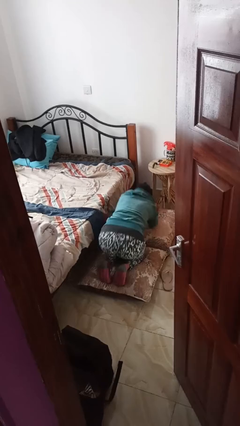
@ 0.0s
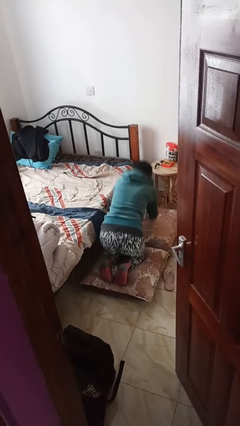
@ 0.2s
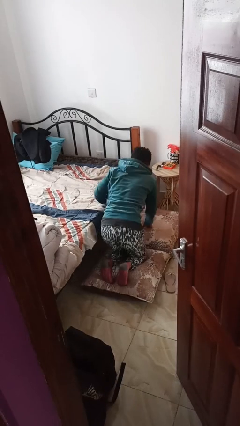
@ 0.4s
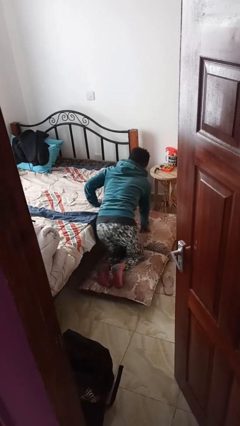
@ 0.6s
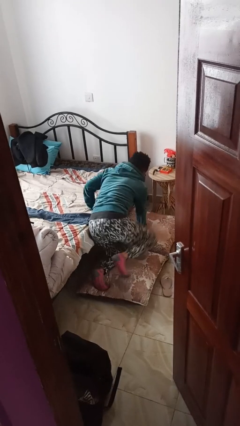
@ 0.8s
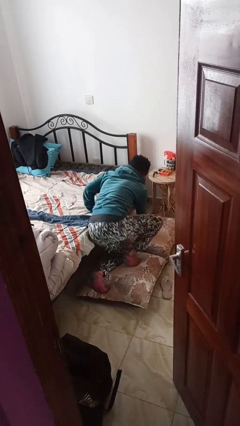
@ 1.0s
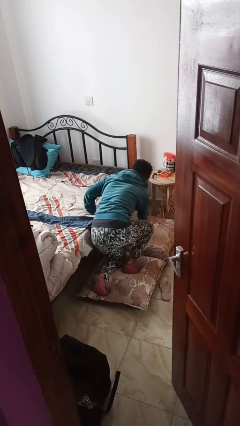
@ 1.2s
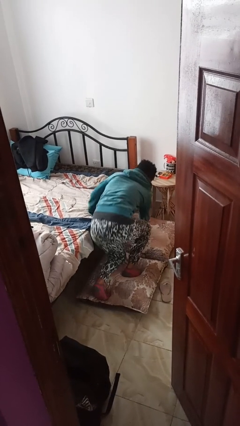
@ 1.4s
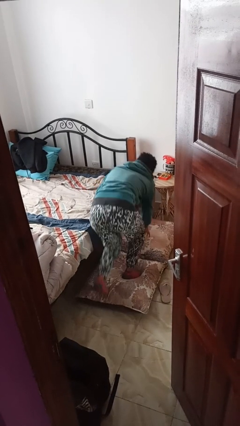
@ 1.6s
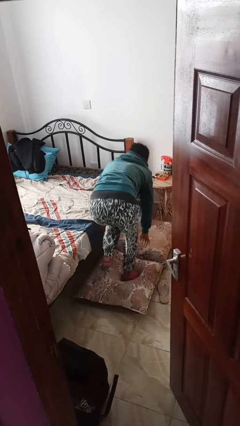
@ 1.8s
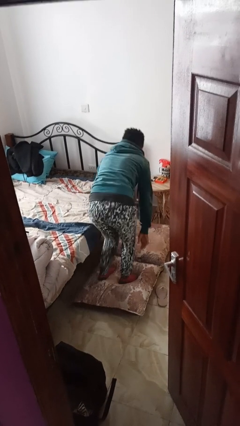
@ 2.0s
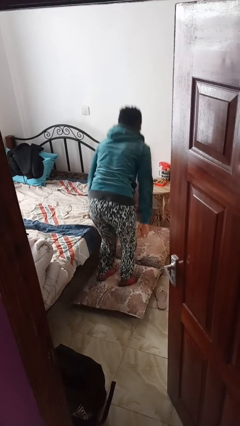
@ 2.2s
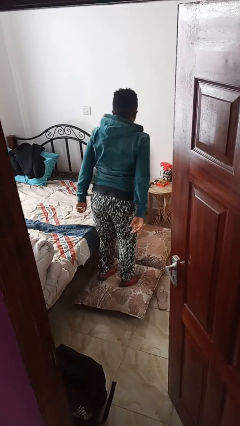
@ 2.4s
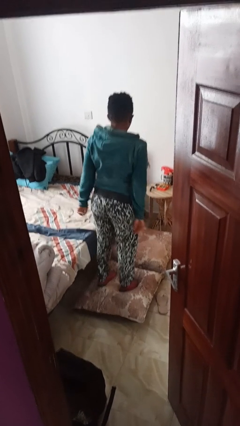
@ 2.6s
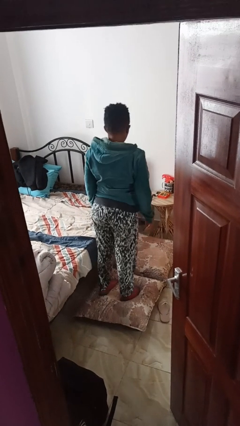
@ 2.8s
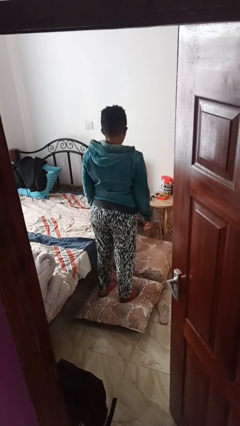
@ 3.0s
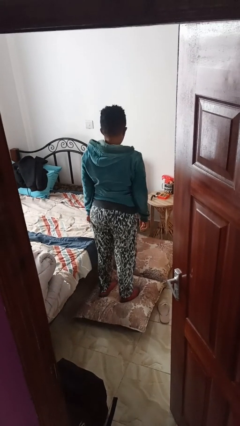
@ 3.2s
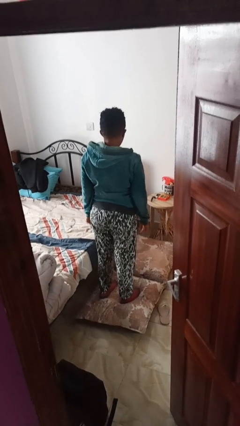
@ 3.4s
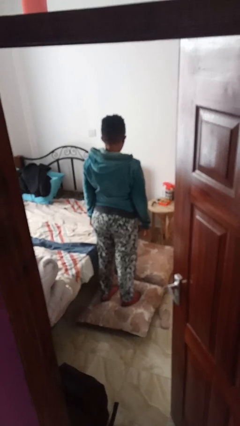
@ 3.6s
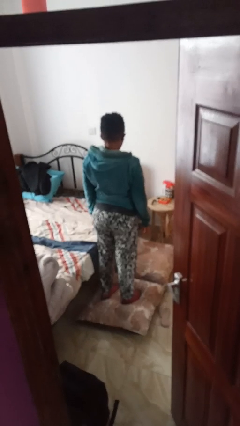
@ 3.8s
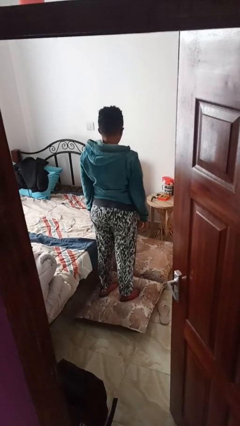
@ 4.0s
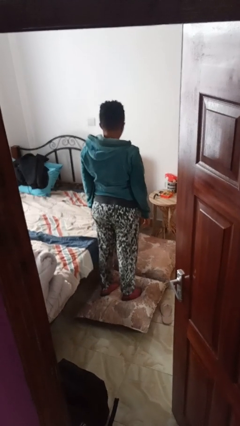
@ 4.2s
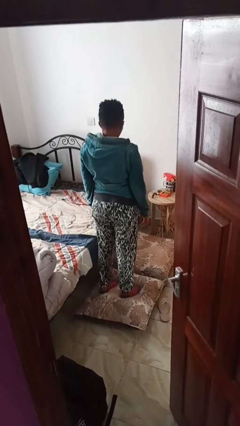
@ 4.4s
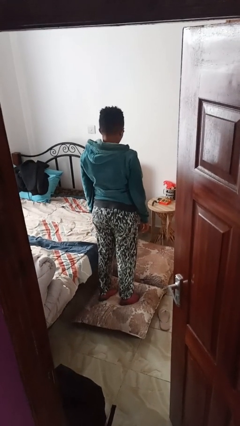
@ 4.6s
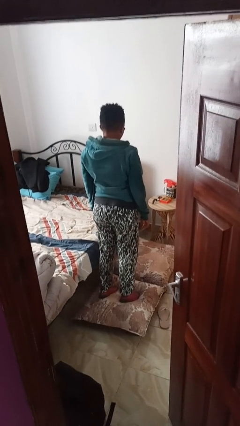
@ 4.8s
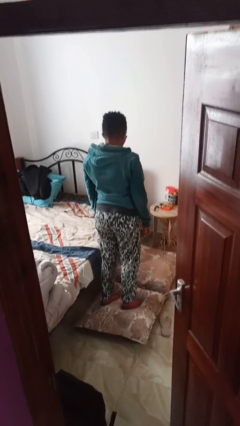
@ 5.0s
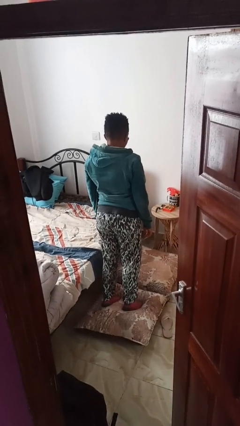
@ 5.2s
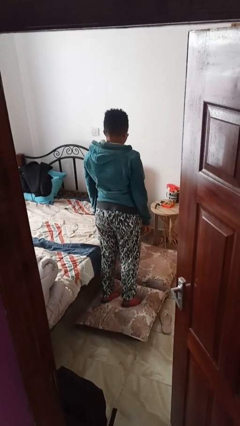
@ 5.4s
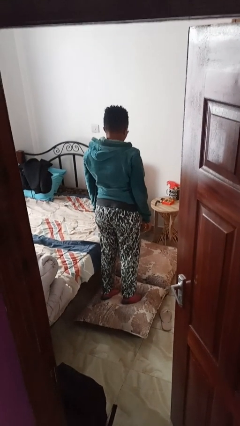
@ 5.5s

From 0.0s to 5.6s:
person stands up from floor

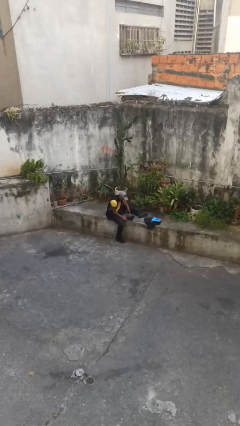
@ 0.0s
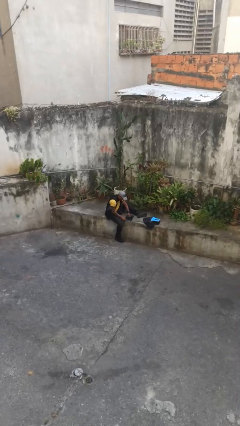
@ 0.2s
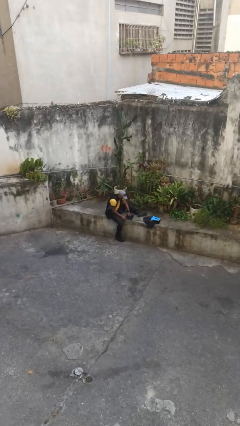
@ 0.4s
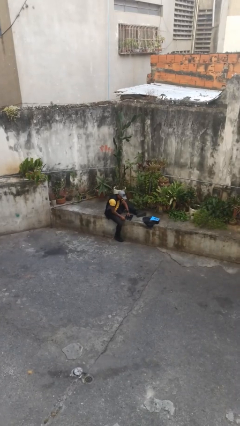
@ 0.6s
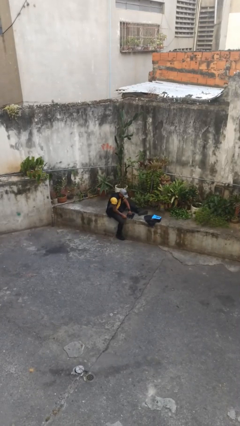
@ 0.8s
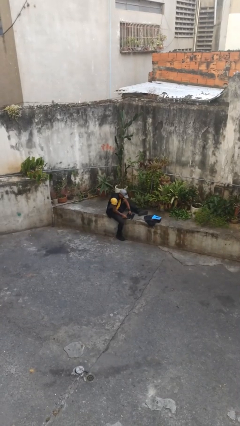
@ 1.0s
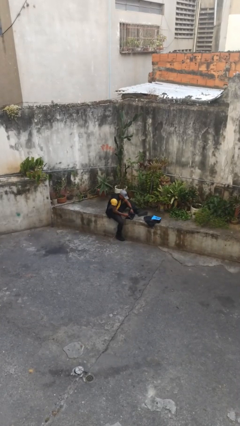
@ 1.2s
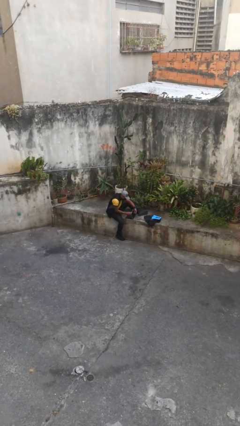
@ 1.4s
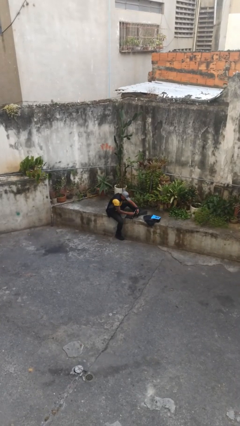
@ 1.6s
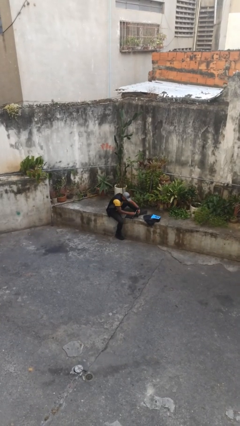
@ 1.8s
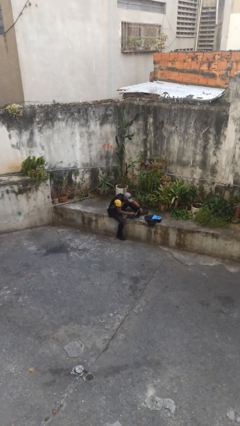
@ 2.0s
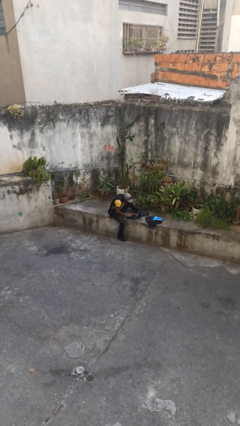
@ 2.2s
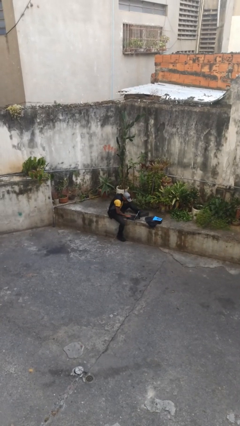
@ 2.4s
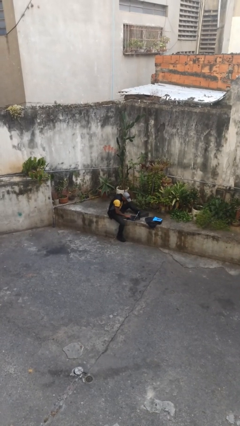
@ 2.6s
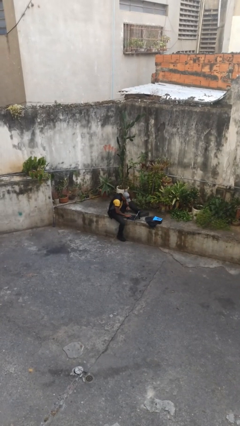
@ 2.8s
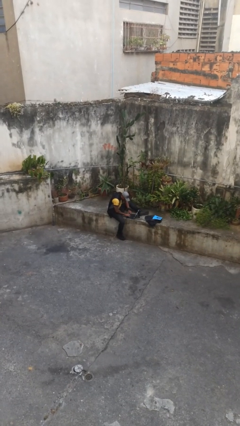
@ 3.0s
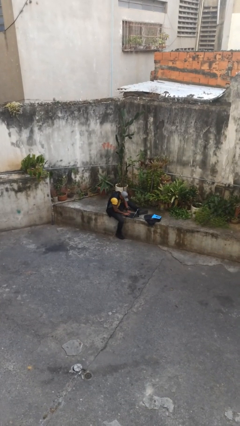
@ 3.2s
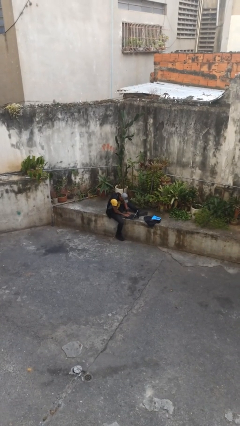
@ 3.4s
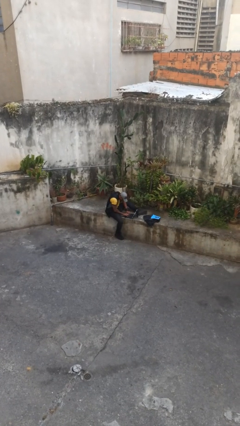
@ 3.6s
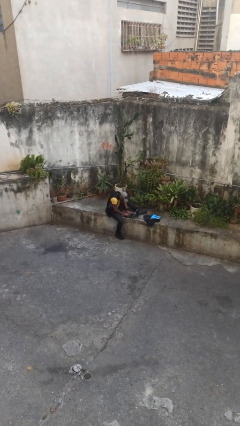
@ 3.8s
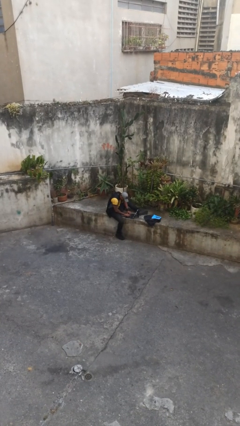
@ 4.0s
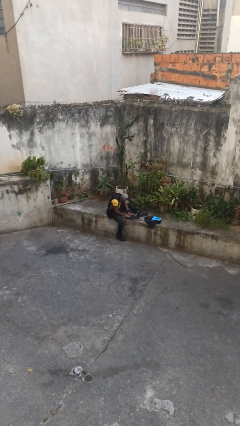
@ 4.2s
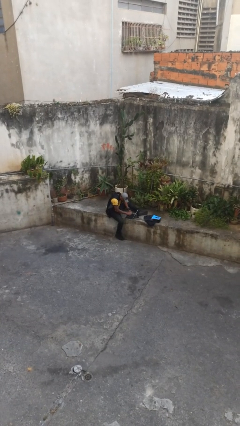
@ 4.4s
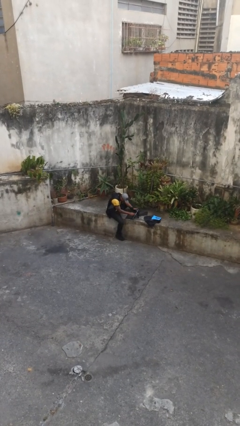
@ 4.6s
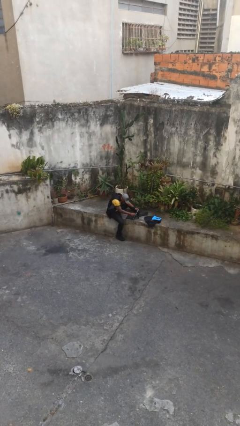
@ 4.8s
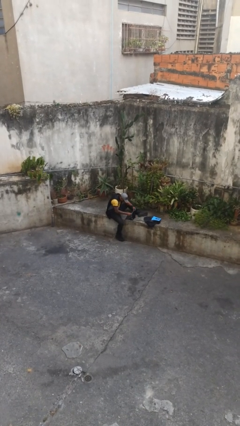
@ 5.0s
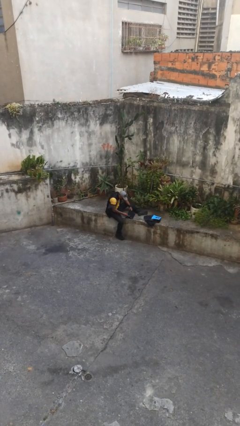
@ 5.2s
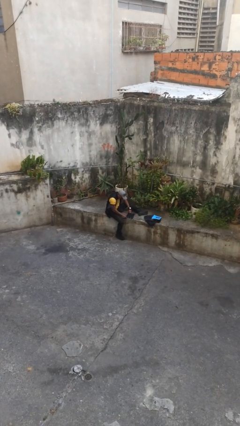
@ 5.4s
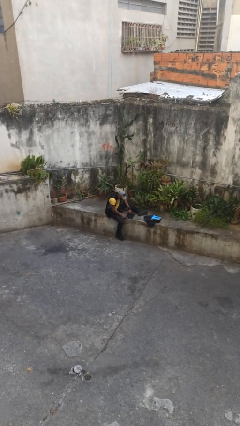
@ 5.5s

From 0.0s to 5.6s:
person interacts with laptop

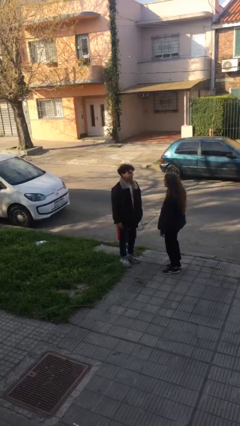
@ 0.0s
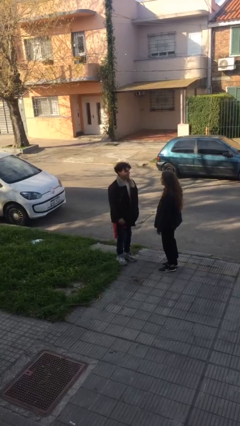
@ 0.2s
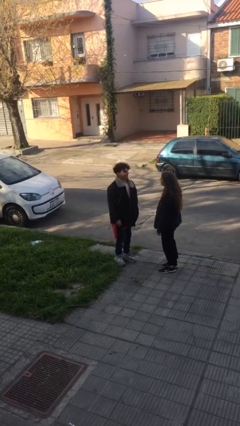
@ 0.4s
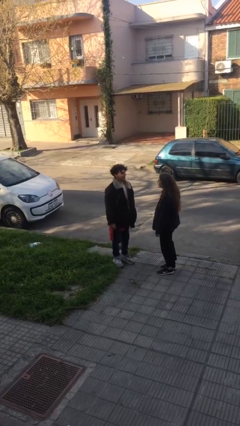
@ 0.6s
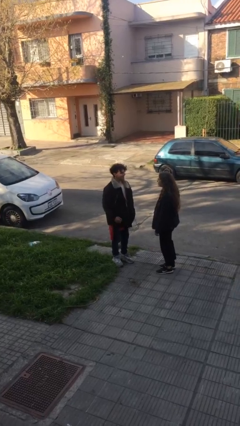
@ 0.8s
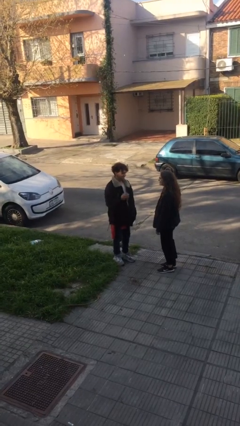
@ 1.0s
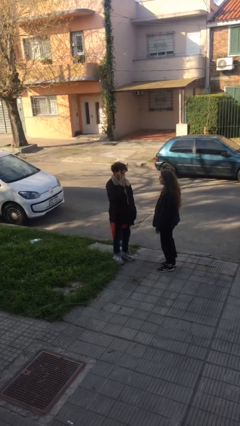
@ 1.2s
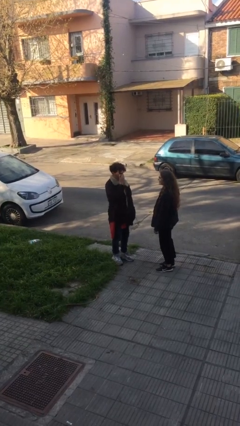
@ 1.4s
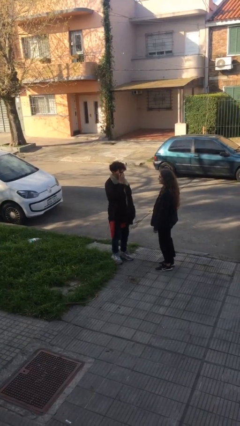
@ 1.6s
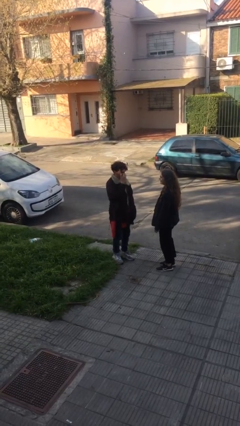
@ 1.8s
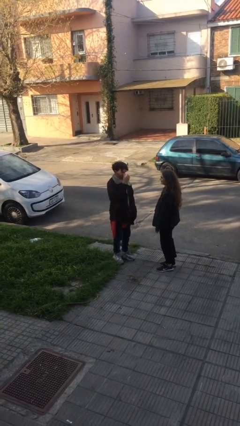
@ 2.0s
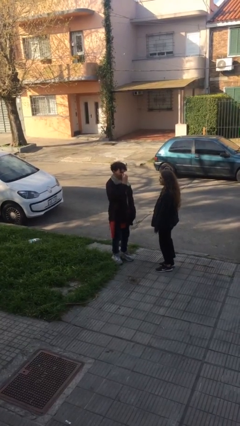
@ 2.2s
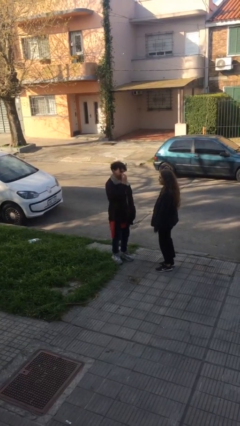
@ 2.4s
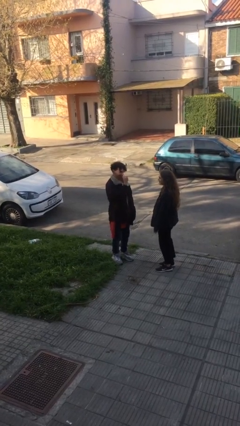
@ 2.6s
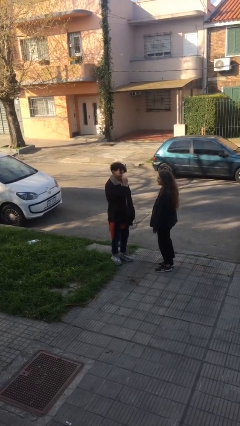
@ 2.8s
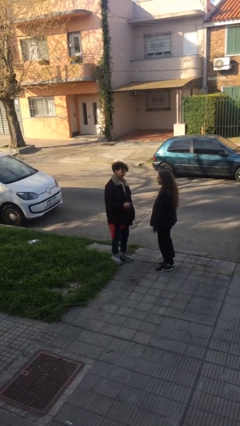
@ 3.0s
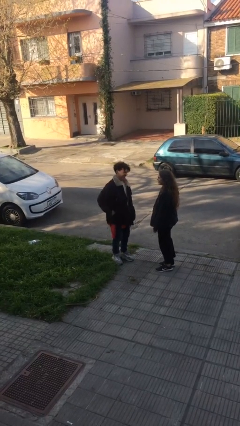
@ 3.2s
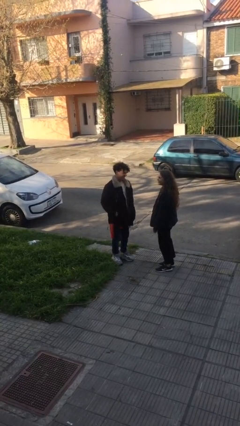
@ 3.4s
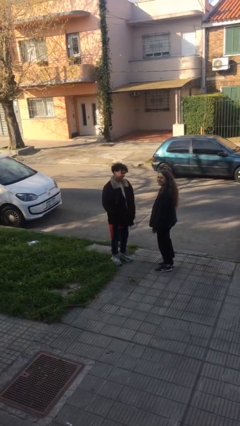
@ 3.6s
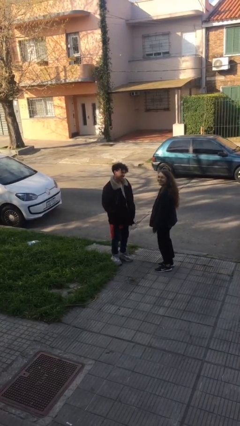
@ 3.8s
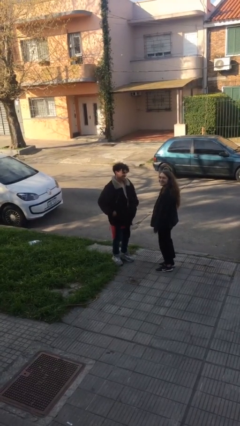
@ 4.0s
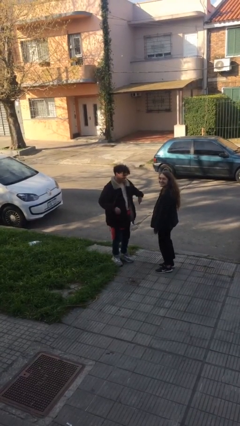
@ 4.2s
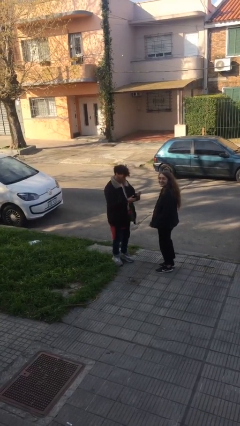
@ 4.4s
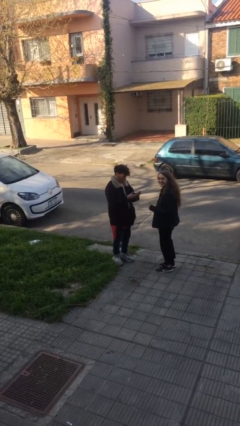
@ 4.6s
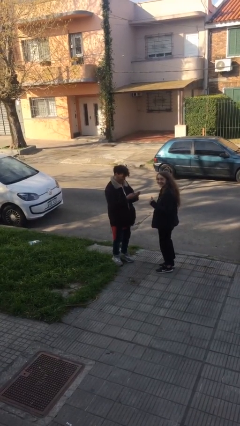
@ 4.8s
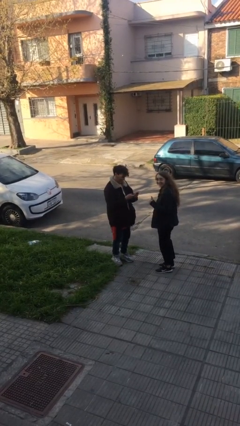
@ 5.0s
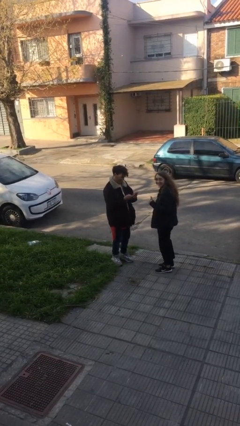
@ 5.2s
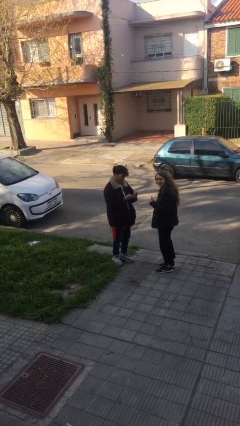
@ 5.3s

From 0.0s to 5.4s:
person talks to person

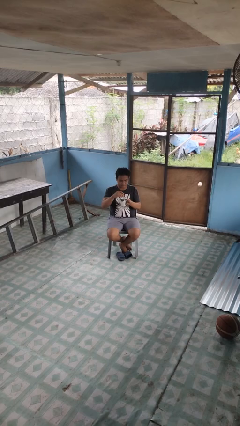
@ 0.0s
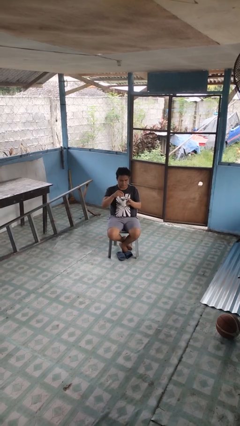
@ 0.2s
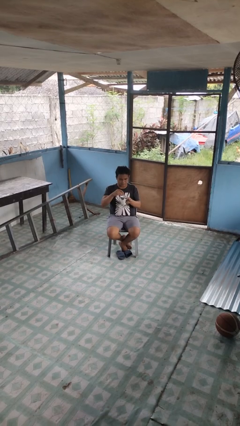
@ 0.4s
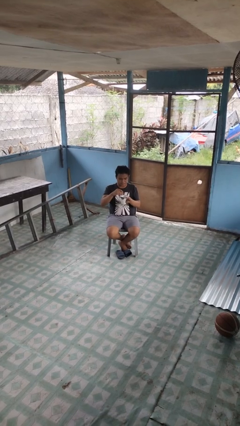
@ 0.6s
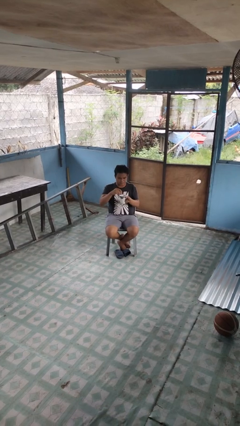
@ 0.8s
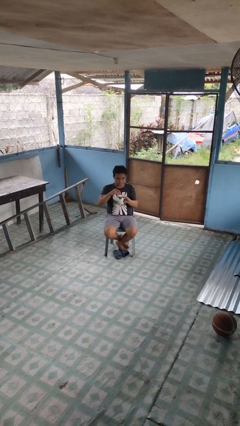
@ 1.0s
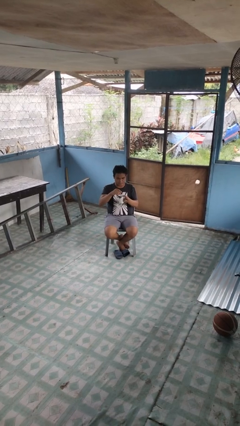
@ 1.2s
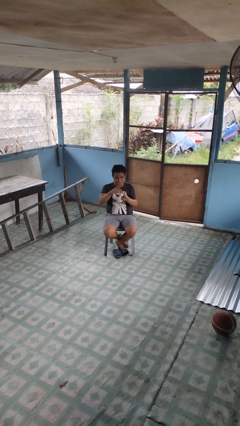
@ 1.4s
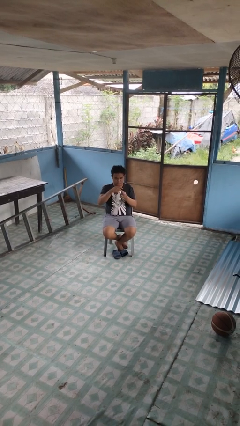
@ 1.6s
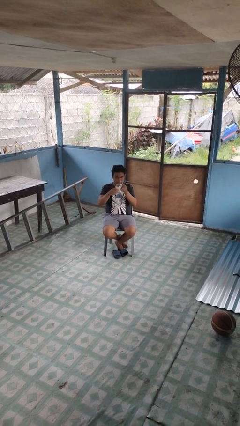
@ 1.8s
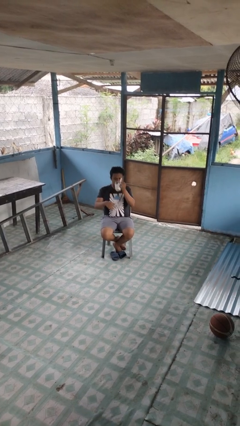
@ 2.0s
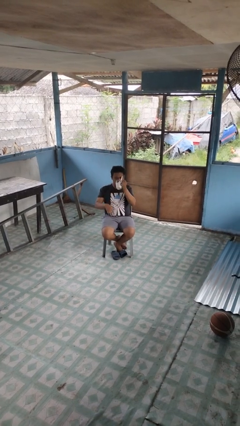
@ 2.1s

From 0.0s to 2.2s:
person stirs mug
